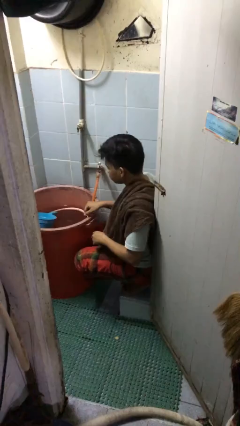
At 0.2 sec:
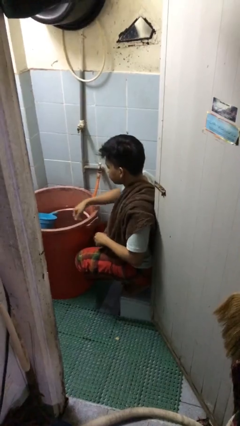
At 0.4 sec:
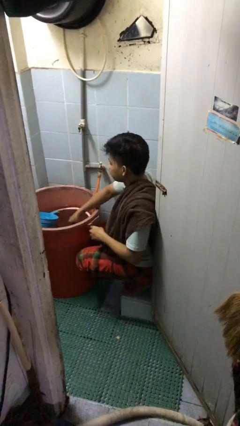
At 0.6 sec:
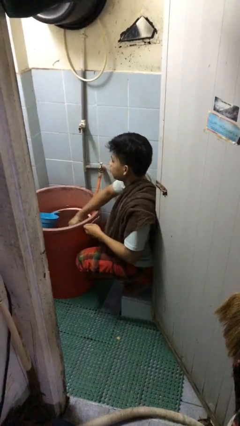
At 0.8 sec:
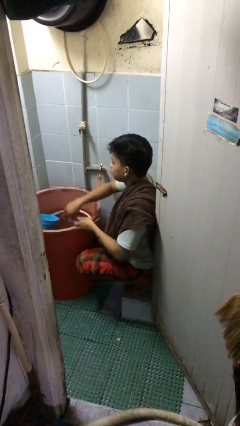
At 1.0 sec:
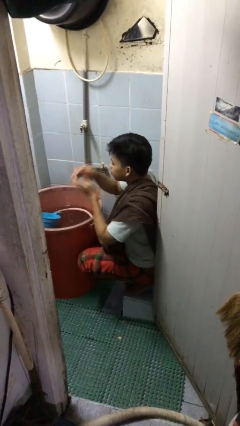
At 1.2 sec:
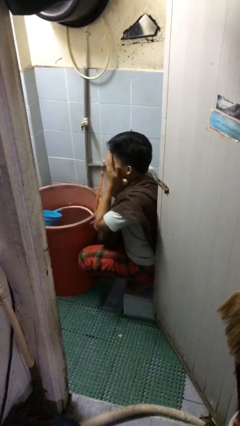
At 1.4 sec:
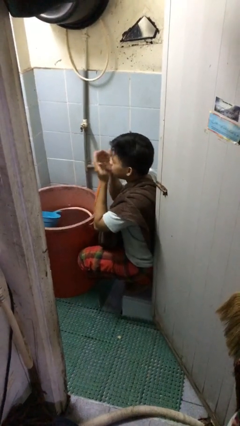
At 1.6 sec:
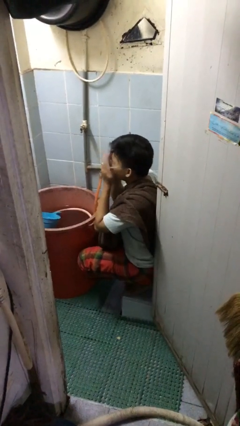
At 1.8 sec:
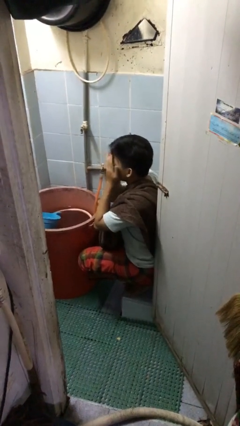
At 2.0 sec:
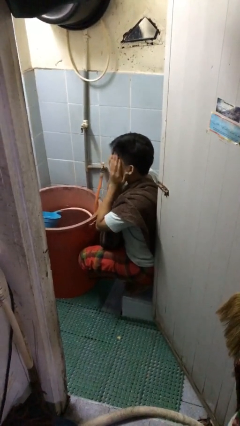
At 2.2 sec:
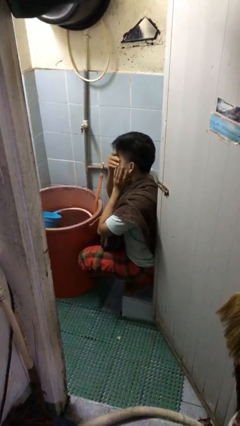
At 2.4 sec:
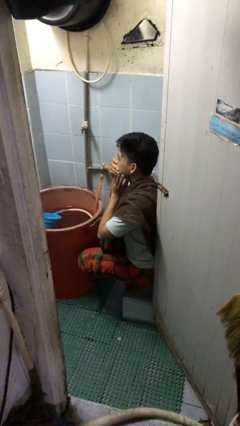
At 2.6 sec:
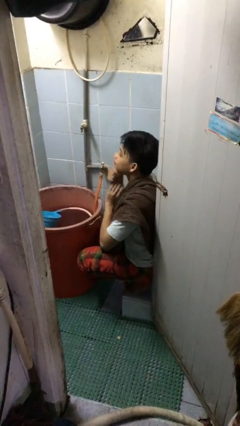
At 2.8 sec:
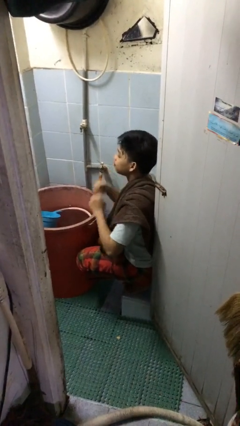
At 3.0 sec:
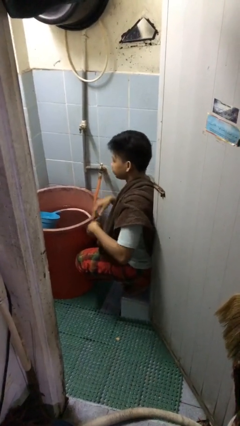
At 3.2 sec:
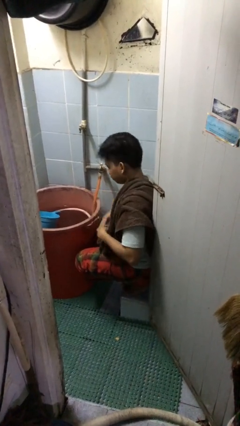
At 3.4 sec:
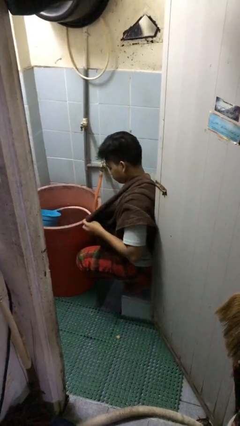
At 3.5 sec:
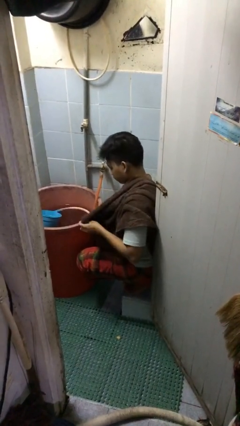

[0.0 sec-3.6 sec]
person washes face

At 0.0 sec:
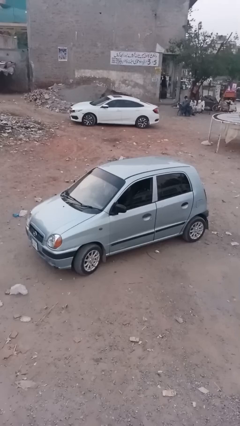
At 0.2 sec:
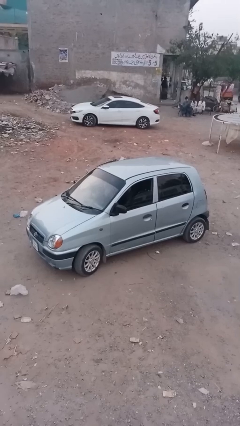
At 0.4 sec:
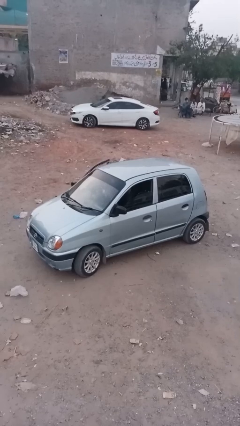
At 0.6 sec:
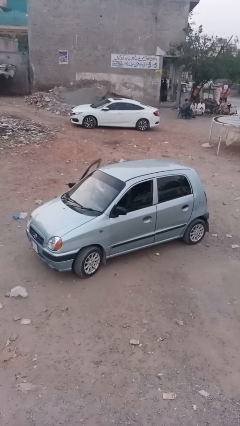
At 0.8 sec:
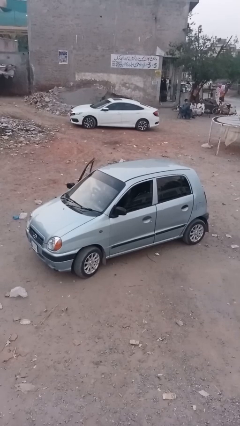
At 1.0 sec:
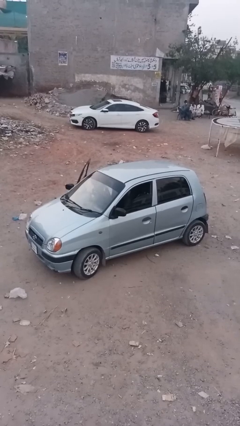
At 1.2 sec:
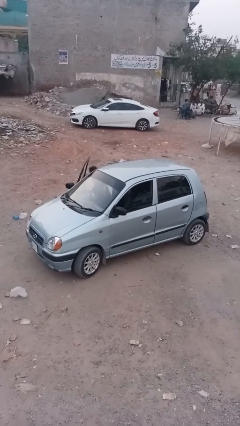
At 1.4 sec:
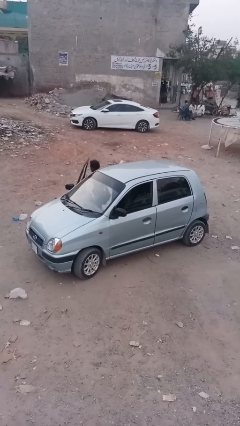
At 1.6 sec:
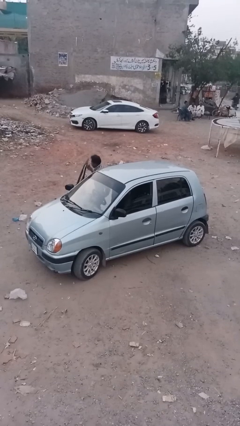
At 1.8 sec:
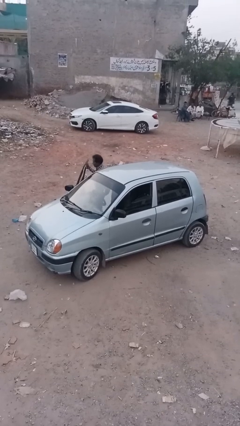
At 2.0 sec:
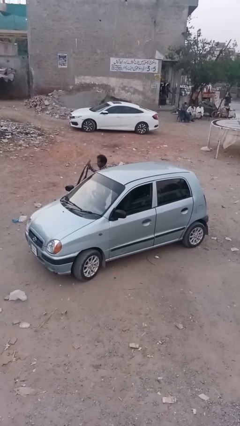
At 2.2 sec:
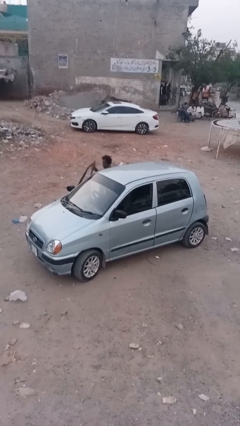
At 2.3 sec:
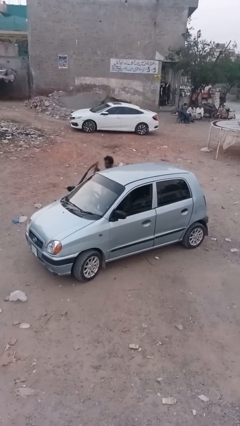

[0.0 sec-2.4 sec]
car drops off person

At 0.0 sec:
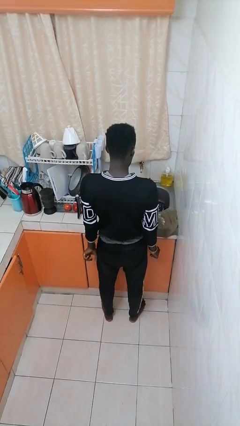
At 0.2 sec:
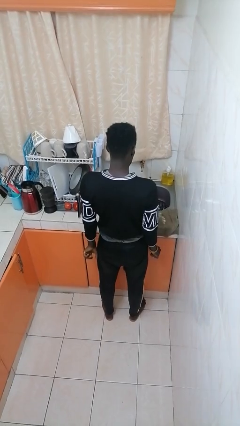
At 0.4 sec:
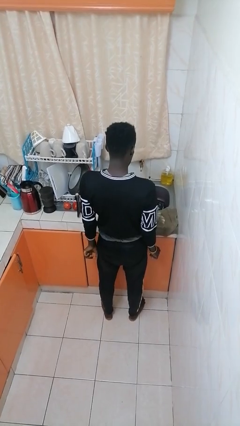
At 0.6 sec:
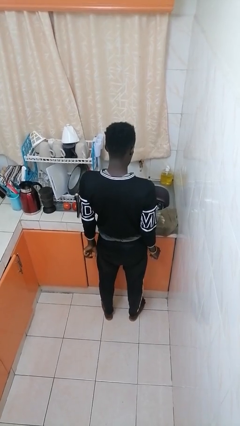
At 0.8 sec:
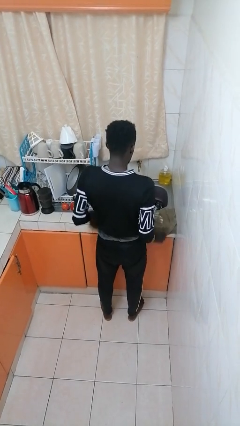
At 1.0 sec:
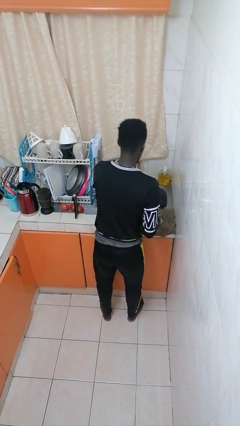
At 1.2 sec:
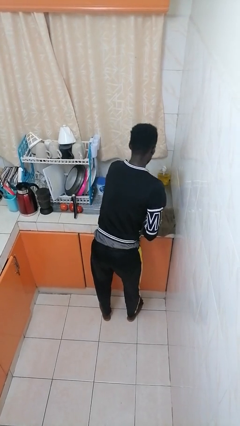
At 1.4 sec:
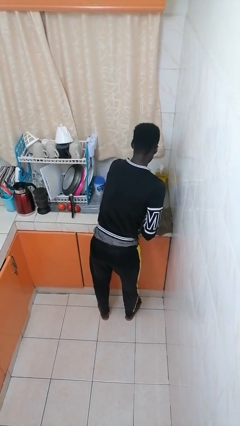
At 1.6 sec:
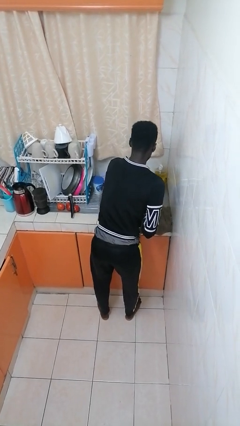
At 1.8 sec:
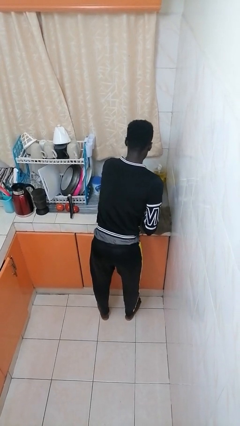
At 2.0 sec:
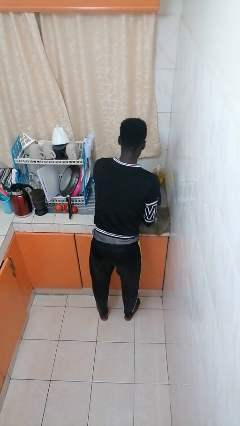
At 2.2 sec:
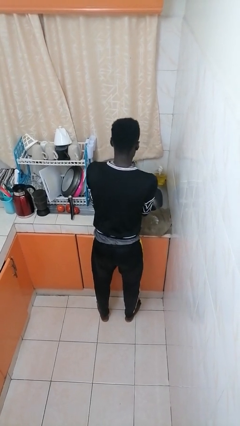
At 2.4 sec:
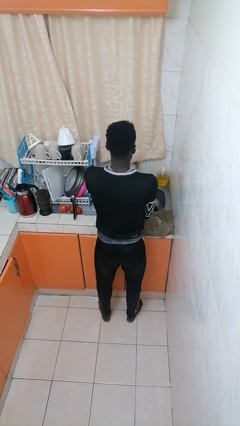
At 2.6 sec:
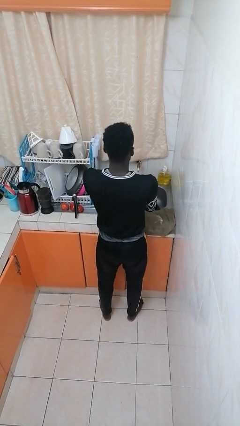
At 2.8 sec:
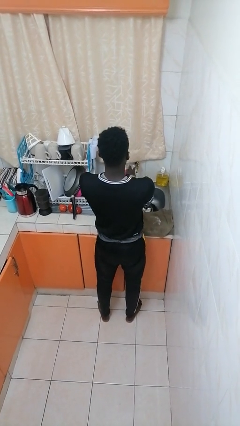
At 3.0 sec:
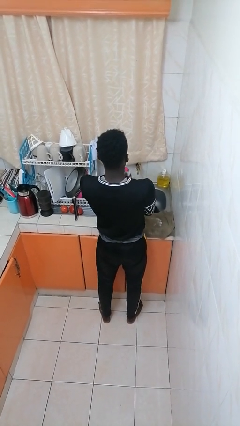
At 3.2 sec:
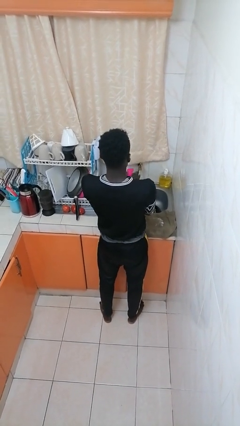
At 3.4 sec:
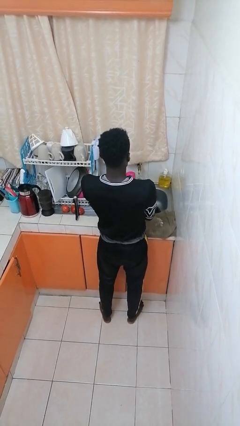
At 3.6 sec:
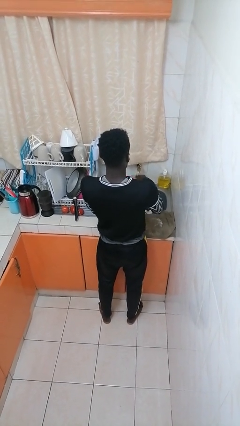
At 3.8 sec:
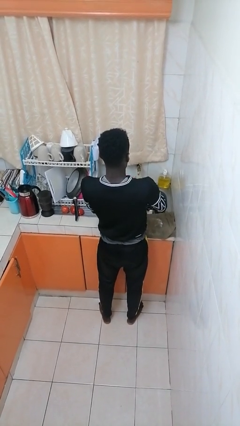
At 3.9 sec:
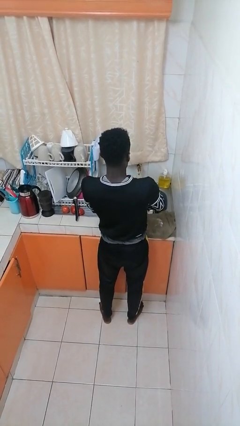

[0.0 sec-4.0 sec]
person washes dish

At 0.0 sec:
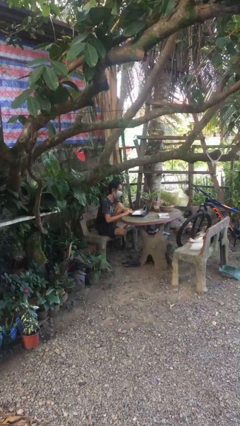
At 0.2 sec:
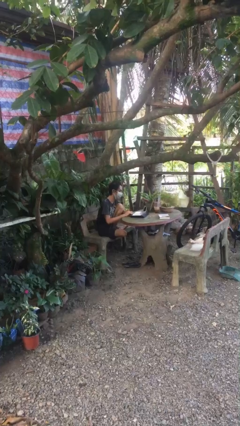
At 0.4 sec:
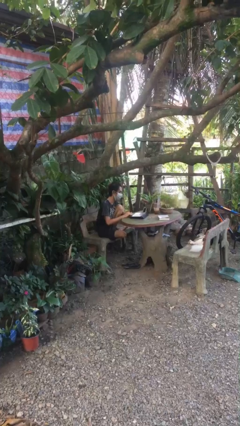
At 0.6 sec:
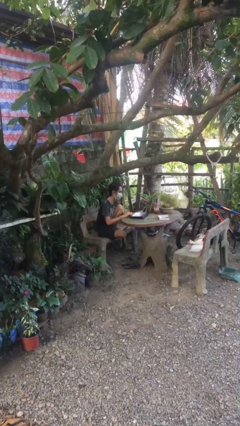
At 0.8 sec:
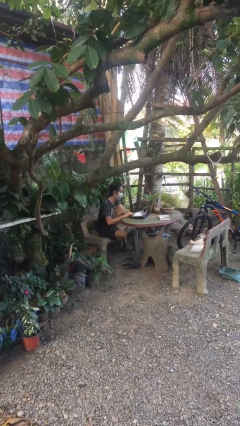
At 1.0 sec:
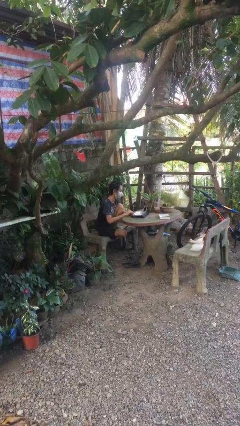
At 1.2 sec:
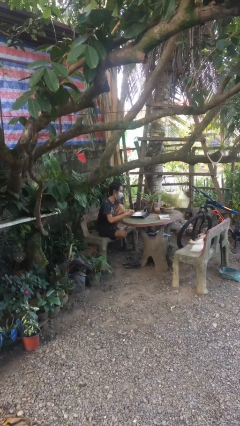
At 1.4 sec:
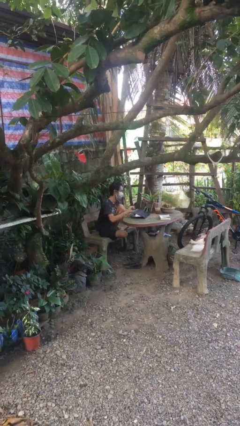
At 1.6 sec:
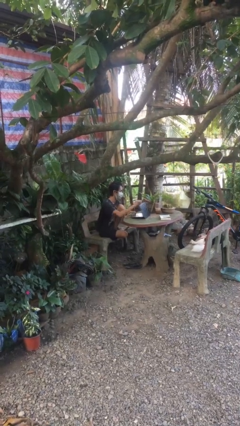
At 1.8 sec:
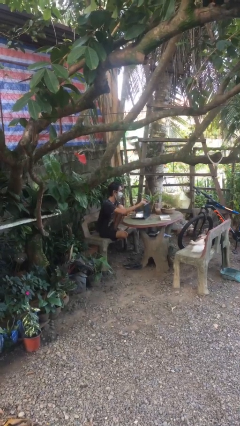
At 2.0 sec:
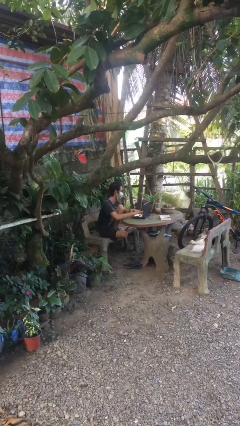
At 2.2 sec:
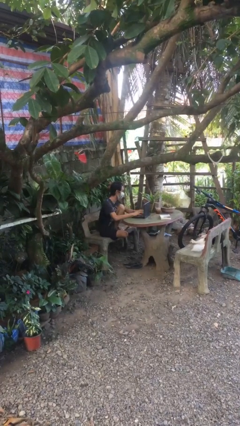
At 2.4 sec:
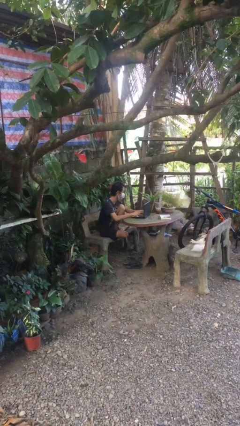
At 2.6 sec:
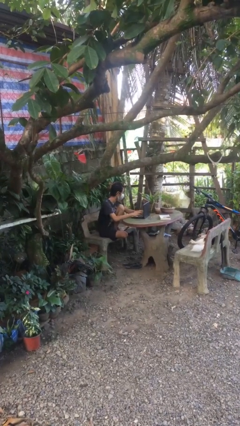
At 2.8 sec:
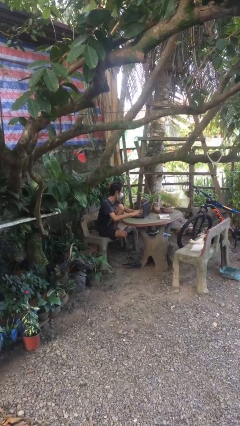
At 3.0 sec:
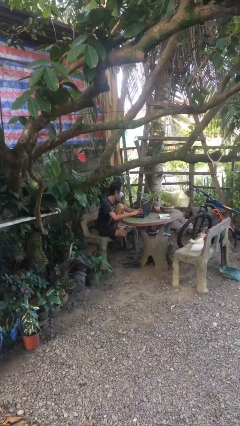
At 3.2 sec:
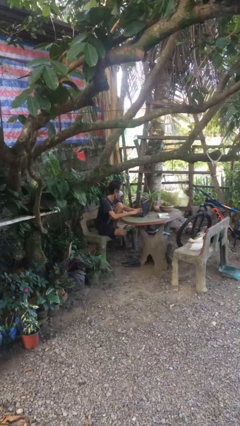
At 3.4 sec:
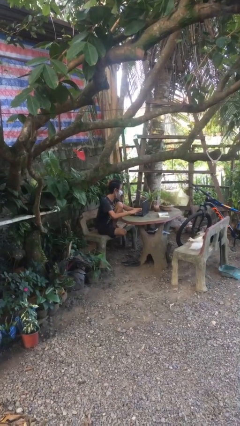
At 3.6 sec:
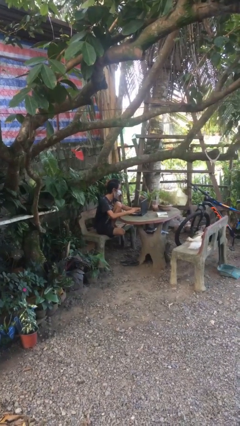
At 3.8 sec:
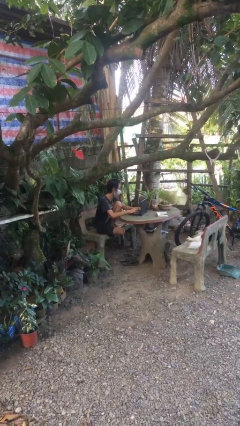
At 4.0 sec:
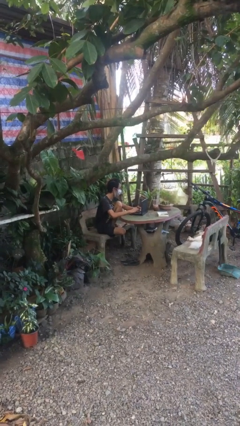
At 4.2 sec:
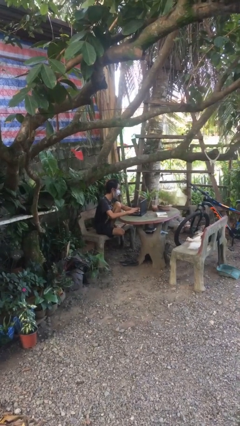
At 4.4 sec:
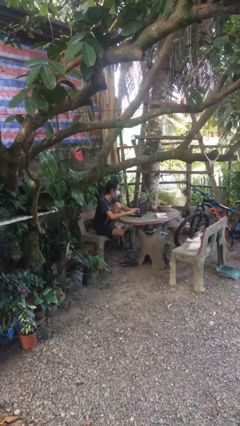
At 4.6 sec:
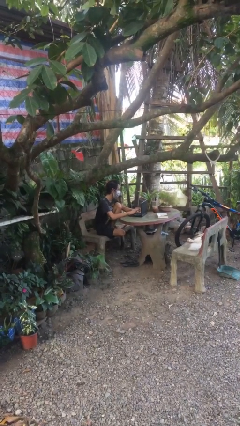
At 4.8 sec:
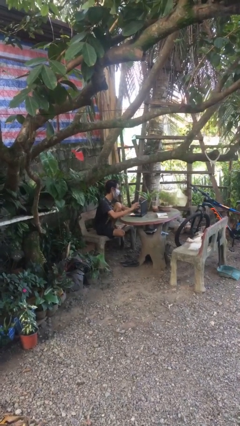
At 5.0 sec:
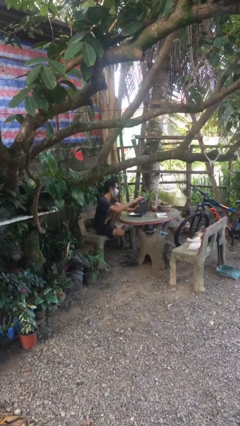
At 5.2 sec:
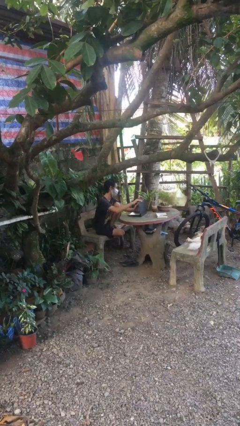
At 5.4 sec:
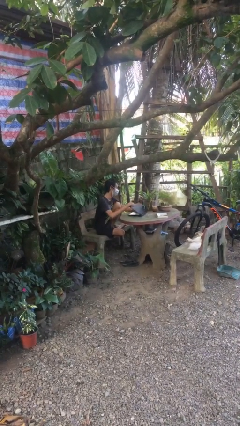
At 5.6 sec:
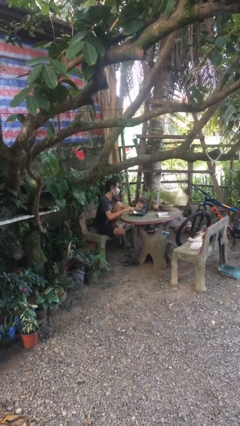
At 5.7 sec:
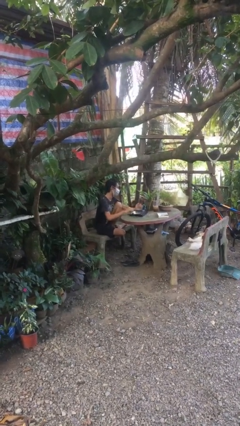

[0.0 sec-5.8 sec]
person interacts with laptop

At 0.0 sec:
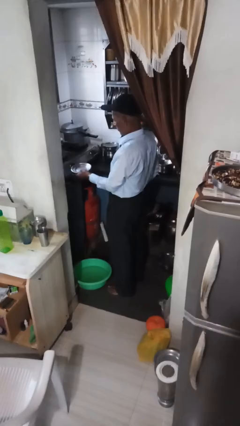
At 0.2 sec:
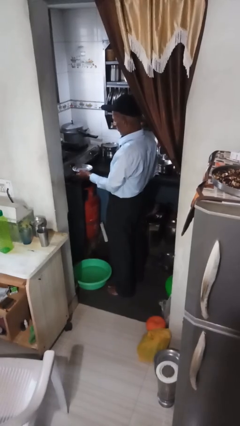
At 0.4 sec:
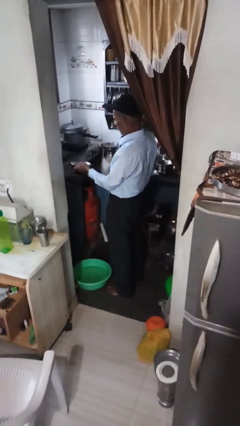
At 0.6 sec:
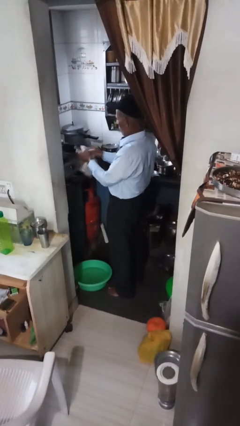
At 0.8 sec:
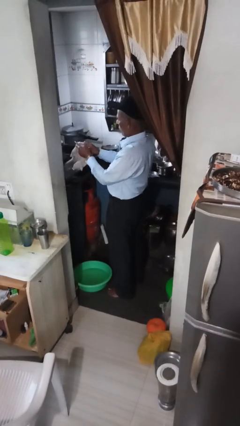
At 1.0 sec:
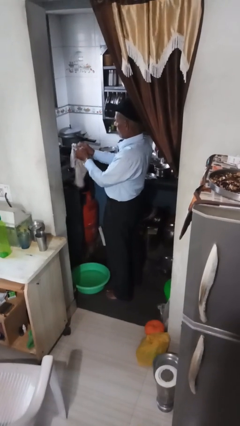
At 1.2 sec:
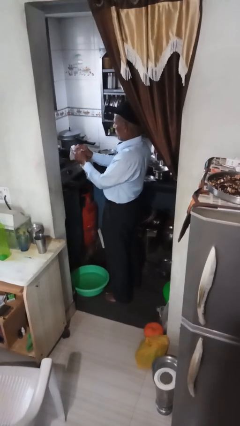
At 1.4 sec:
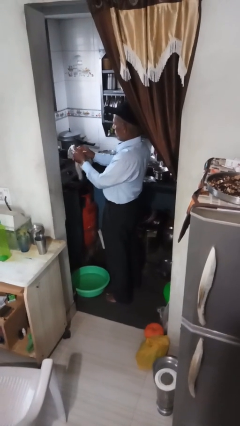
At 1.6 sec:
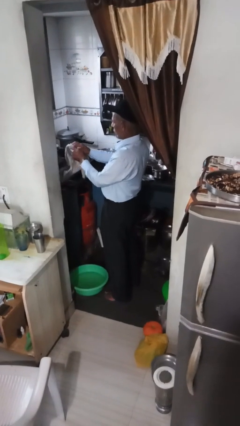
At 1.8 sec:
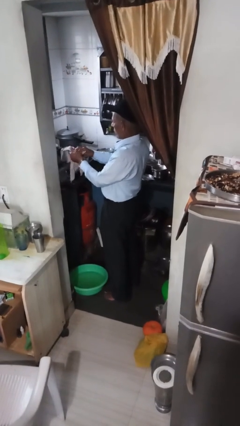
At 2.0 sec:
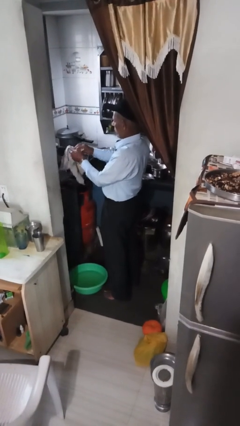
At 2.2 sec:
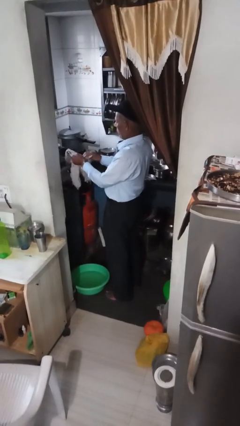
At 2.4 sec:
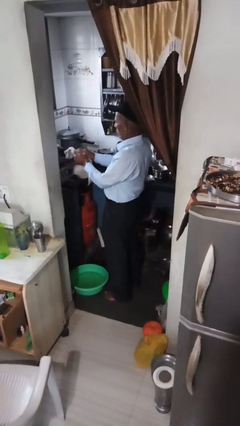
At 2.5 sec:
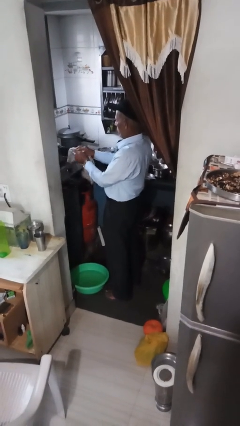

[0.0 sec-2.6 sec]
person dries dish
